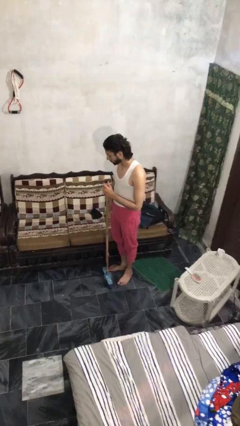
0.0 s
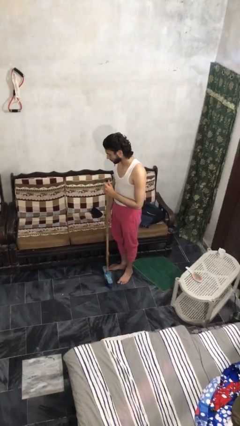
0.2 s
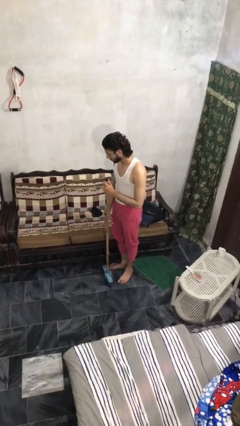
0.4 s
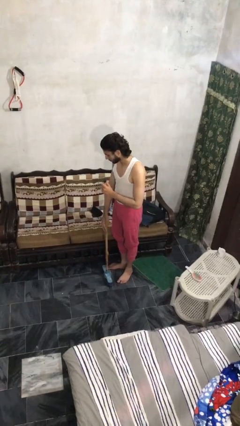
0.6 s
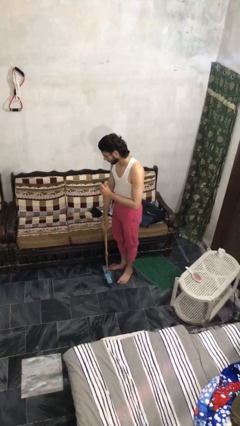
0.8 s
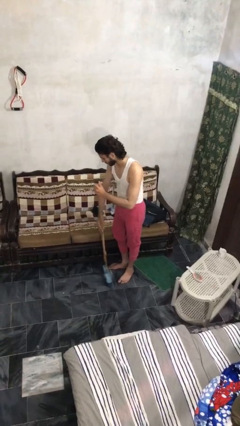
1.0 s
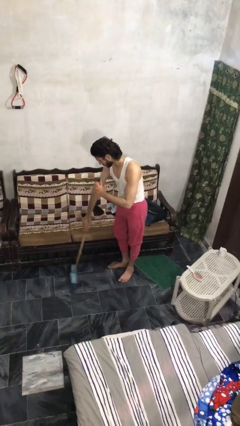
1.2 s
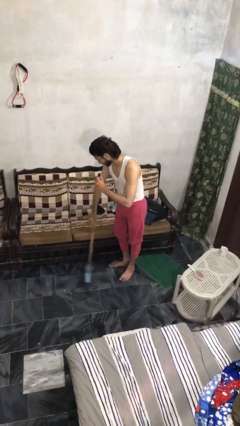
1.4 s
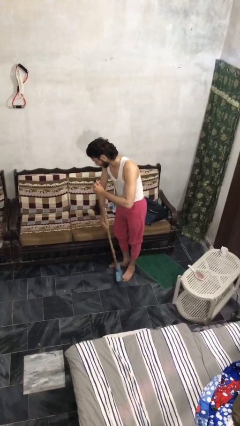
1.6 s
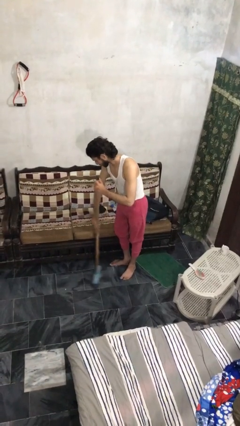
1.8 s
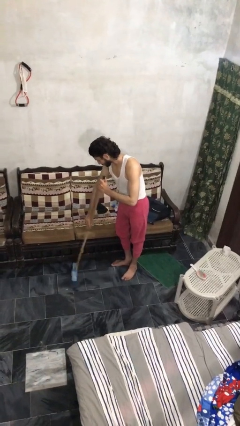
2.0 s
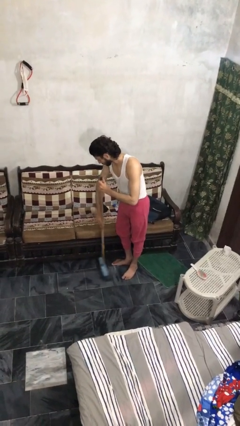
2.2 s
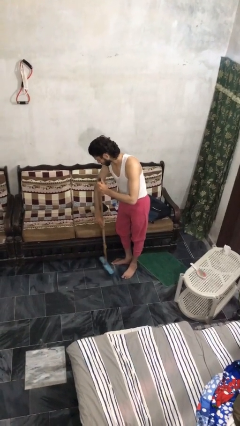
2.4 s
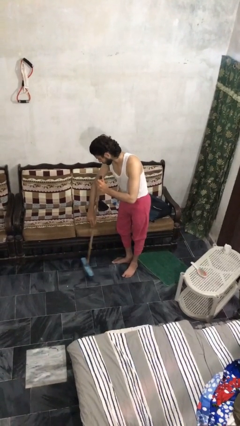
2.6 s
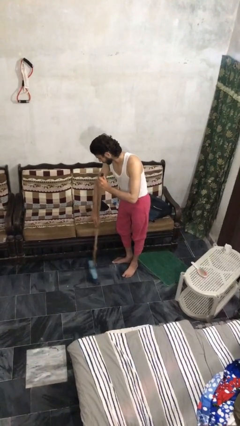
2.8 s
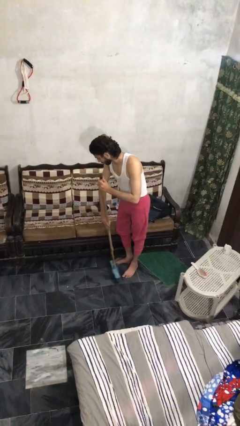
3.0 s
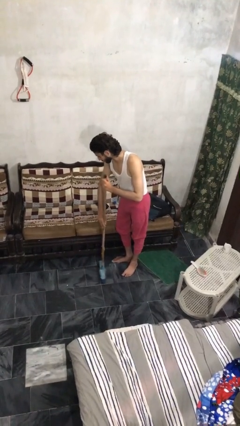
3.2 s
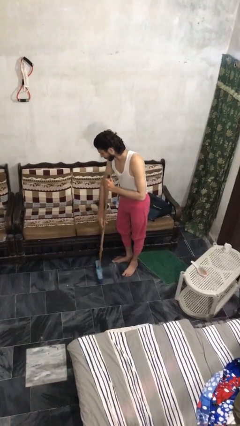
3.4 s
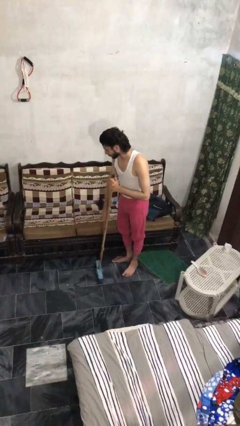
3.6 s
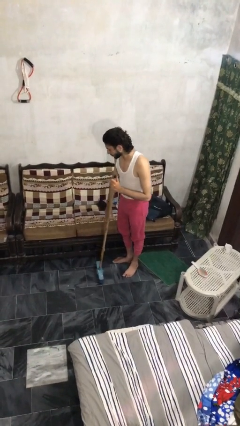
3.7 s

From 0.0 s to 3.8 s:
person sweeps floor

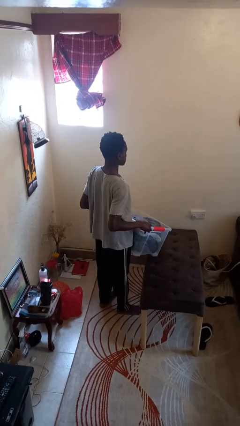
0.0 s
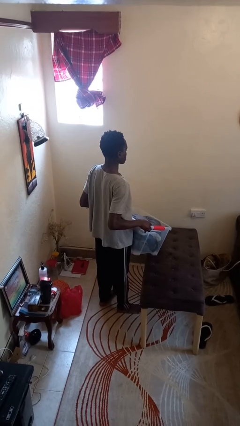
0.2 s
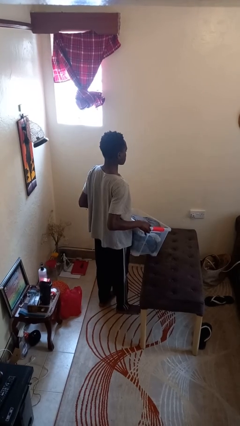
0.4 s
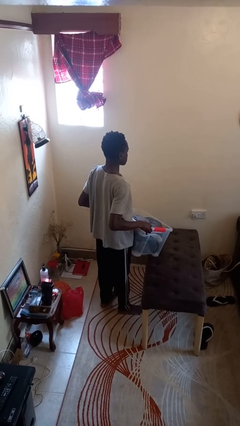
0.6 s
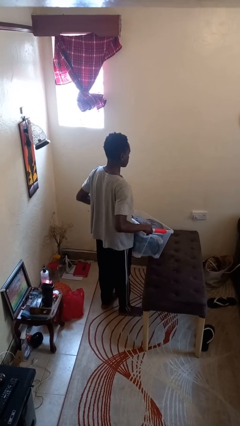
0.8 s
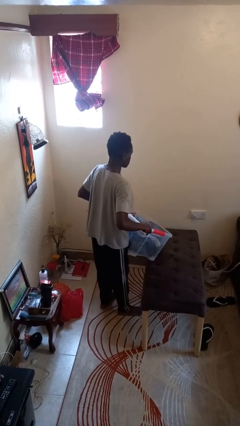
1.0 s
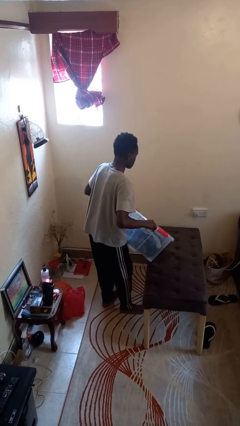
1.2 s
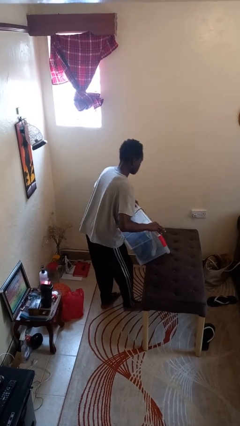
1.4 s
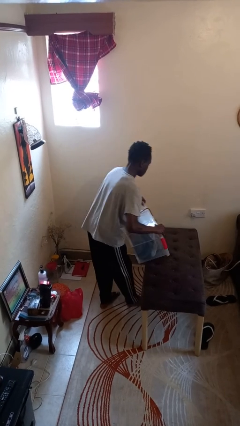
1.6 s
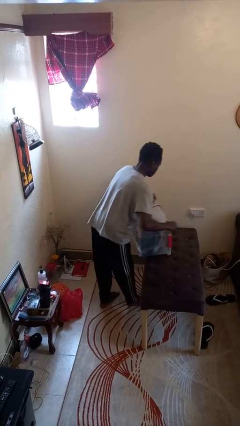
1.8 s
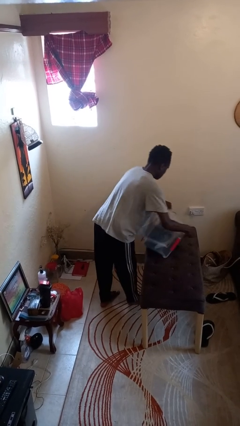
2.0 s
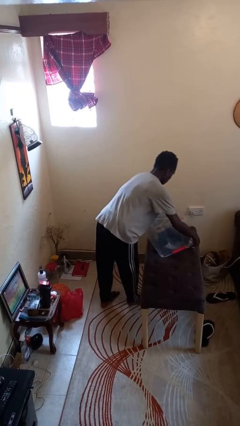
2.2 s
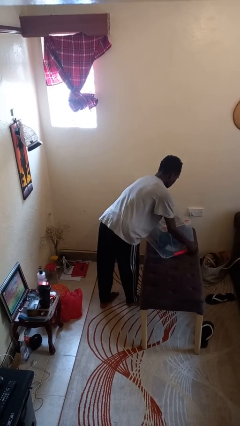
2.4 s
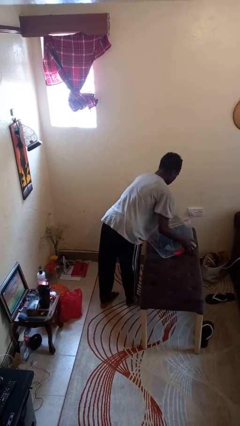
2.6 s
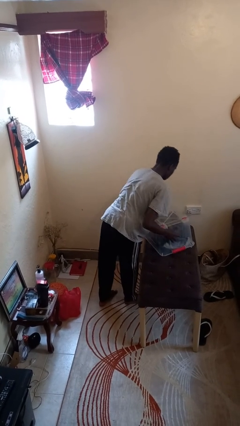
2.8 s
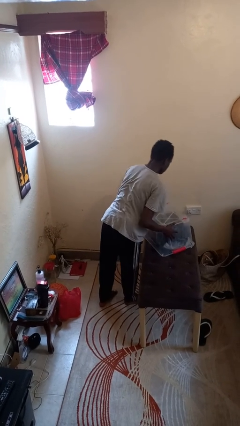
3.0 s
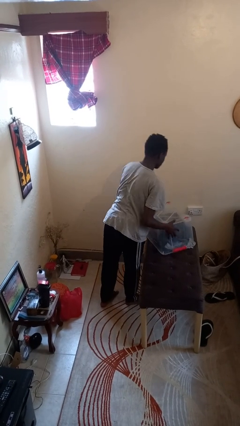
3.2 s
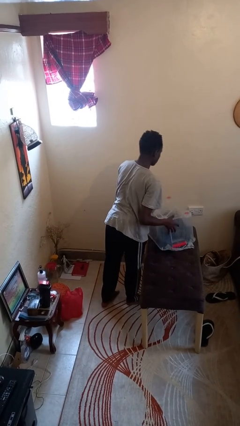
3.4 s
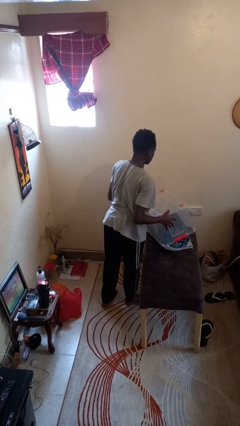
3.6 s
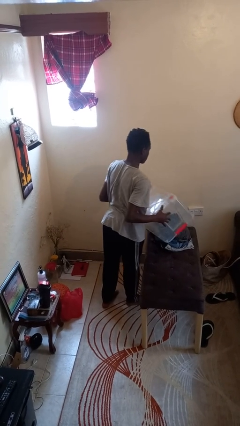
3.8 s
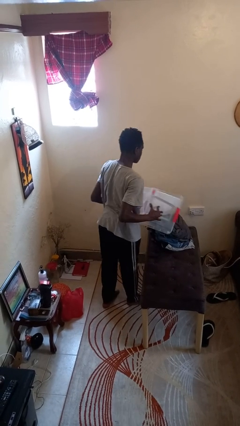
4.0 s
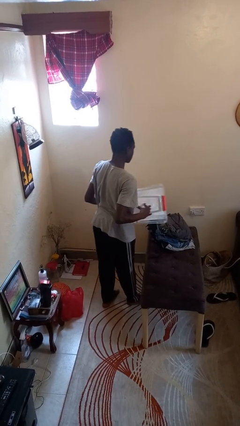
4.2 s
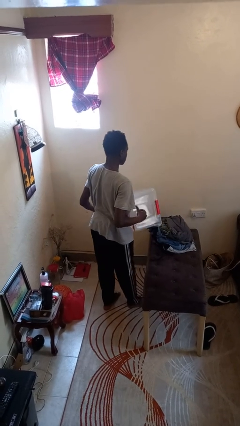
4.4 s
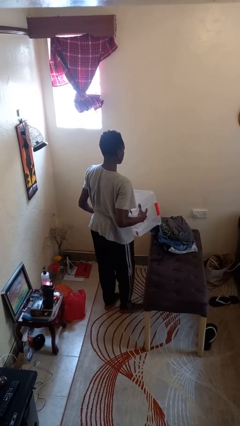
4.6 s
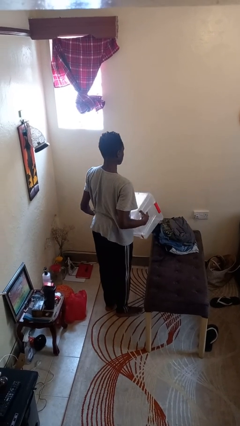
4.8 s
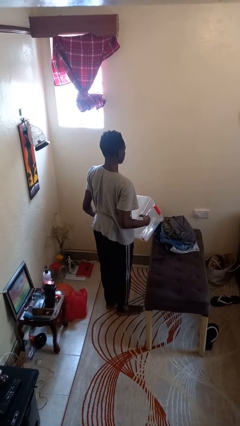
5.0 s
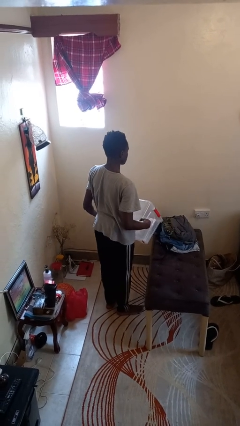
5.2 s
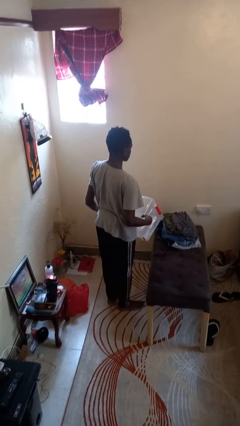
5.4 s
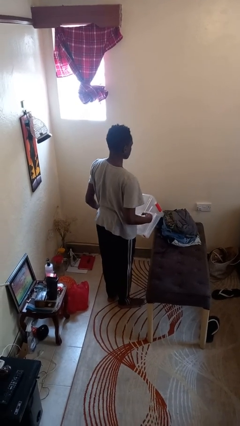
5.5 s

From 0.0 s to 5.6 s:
person unloads box onto table

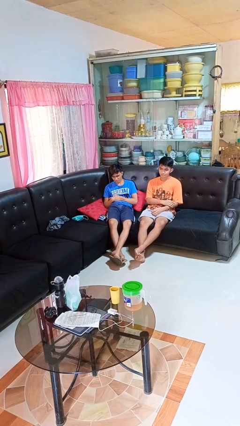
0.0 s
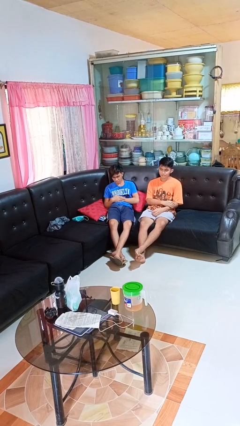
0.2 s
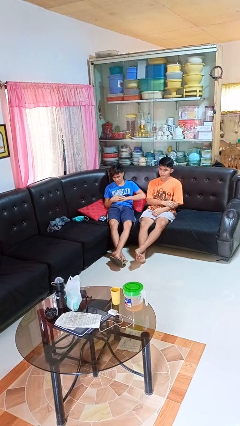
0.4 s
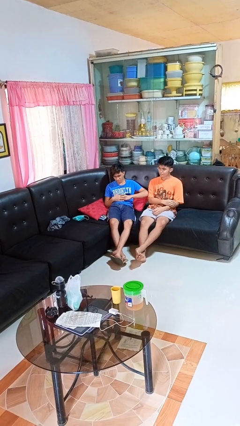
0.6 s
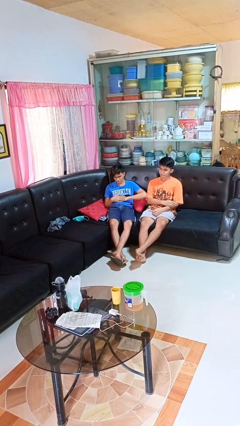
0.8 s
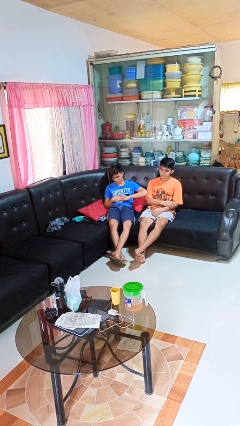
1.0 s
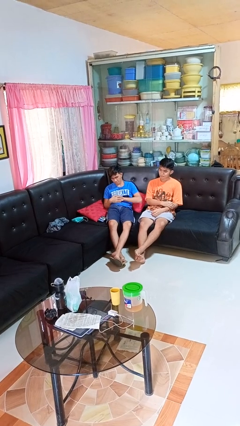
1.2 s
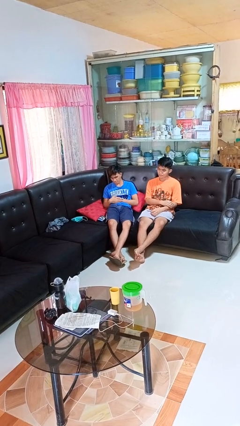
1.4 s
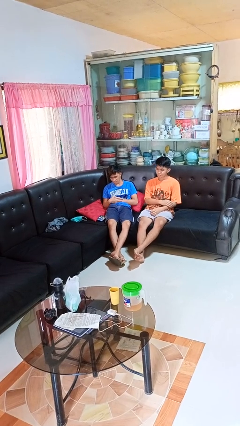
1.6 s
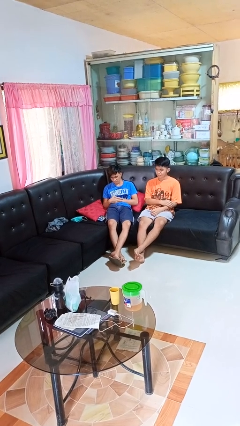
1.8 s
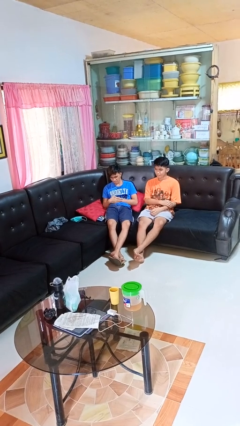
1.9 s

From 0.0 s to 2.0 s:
person nudges person with elbow

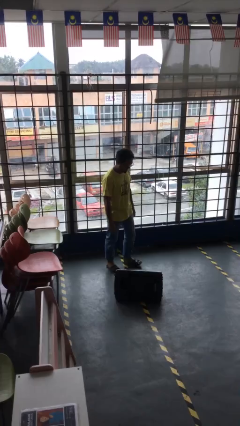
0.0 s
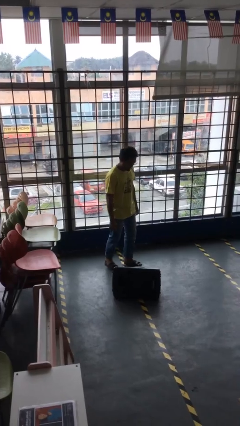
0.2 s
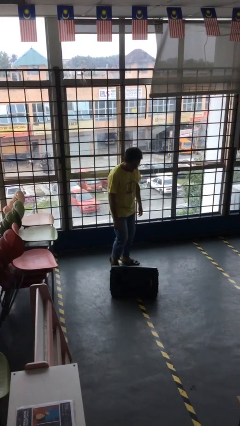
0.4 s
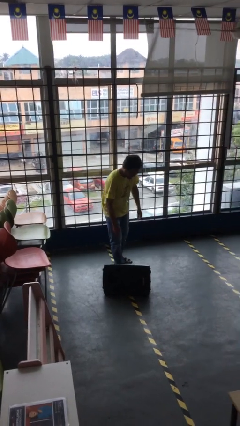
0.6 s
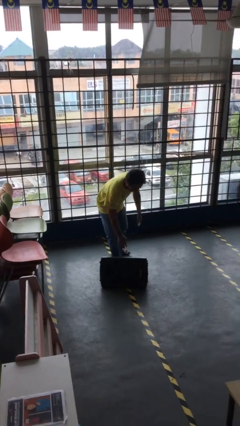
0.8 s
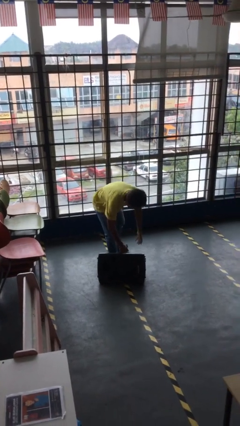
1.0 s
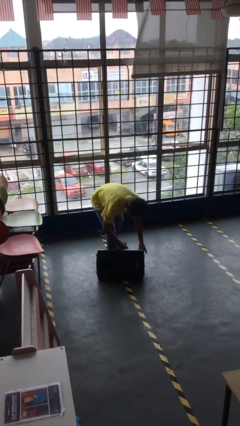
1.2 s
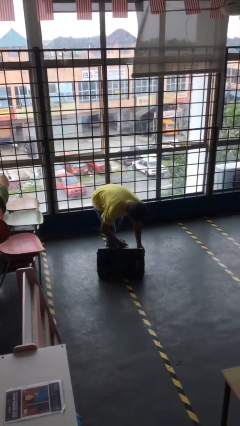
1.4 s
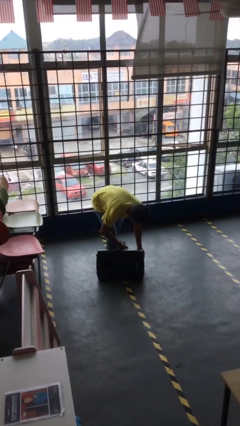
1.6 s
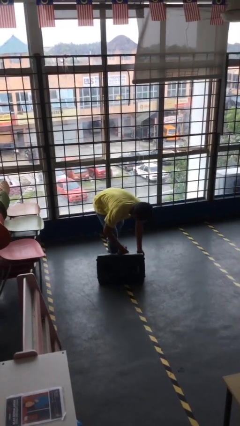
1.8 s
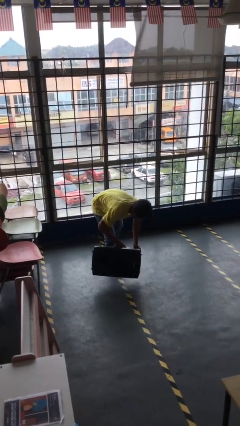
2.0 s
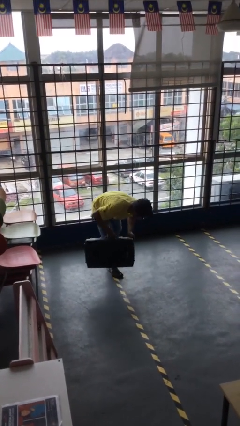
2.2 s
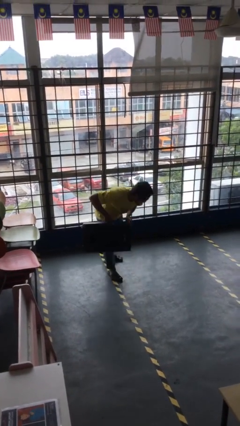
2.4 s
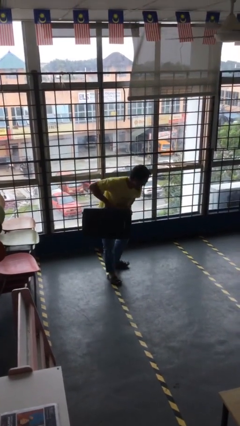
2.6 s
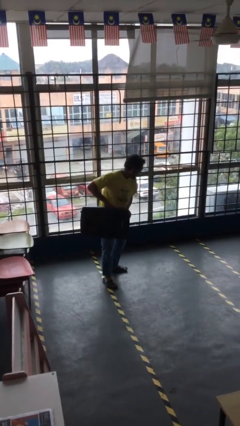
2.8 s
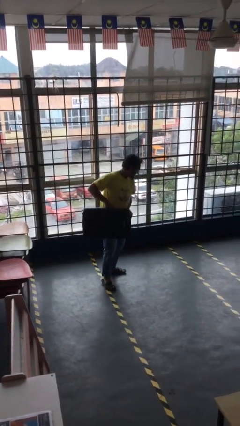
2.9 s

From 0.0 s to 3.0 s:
person picks up object from floor

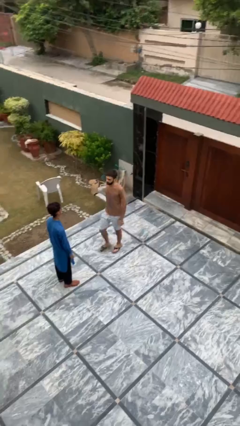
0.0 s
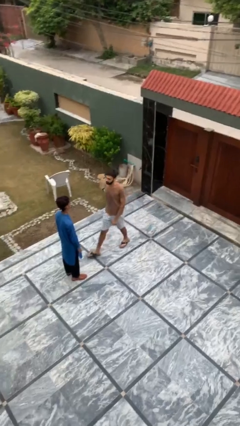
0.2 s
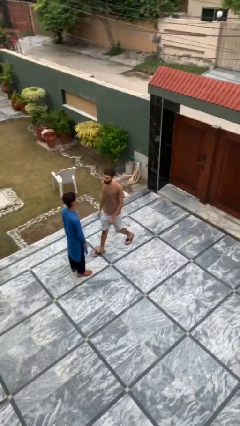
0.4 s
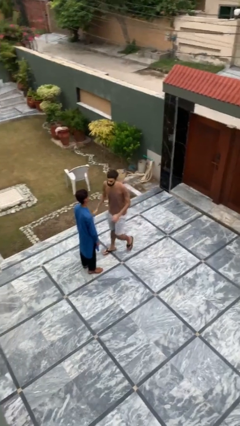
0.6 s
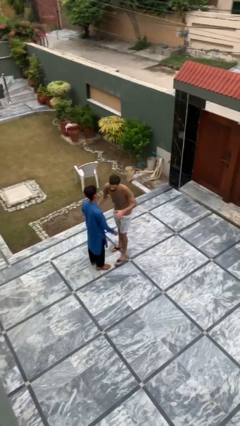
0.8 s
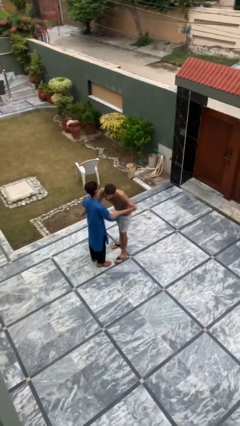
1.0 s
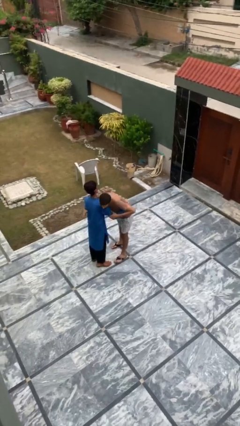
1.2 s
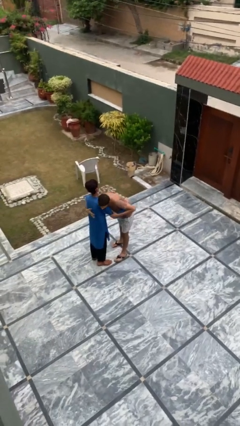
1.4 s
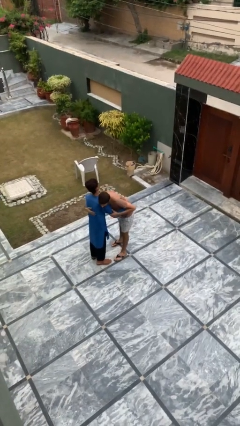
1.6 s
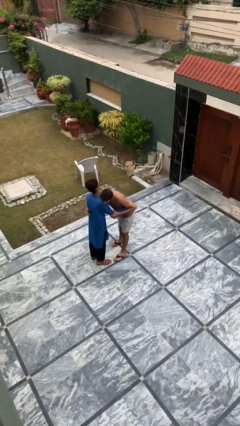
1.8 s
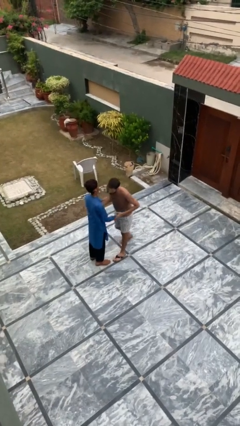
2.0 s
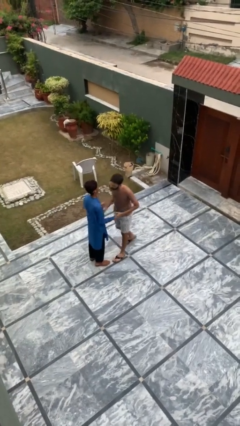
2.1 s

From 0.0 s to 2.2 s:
person embraces person

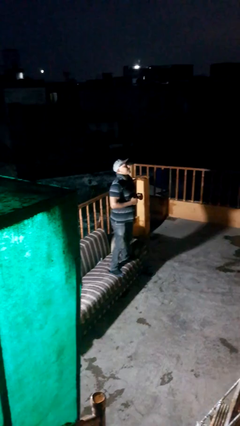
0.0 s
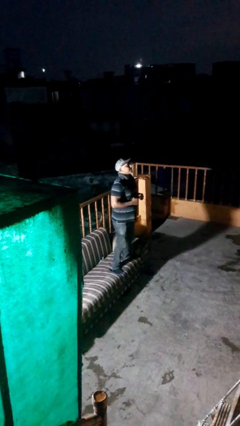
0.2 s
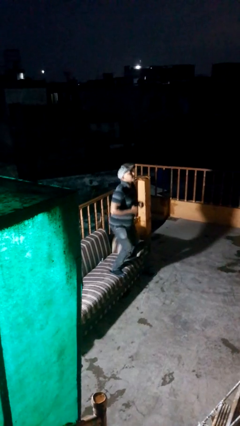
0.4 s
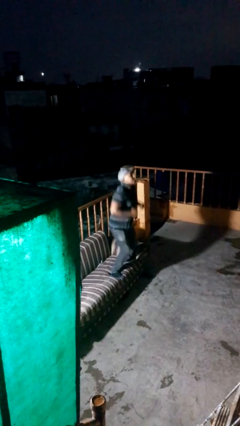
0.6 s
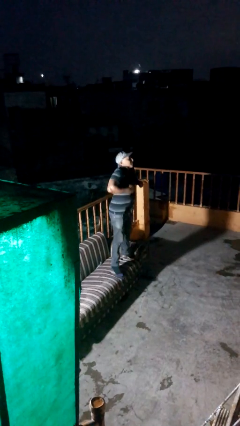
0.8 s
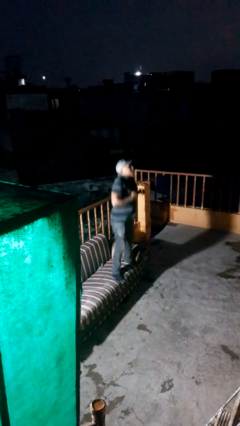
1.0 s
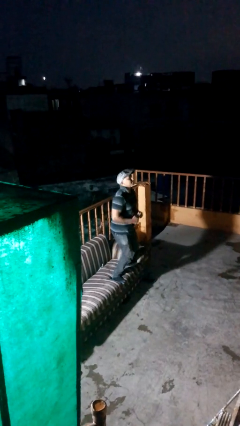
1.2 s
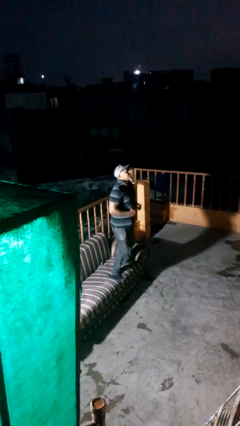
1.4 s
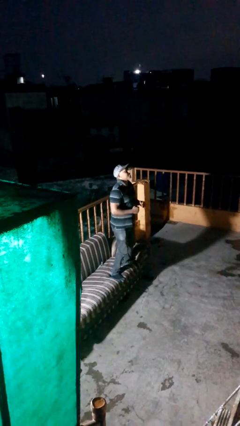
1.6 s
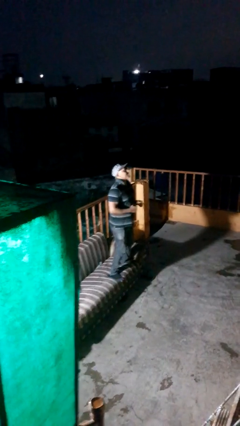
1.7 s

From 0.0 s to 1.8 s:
person jumps on couch
